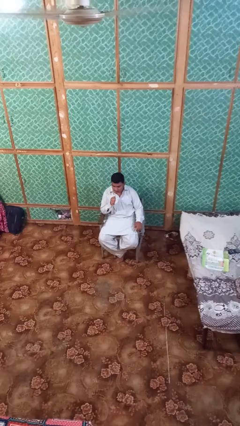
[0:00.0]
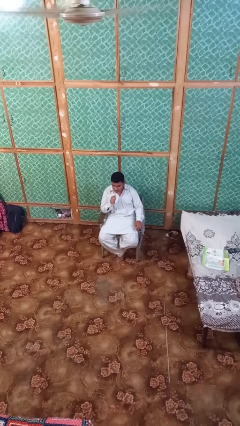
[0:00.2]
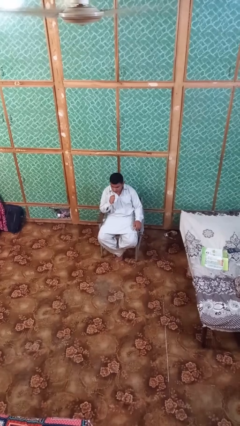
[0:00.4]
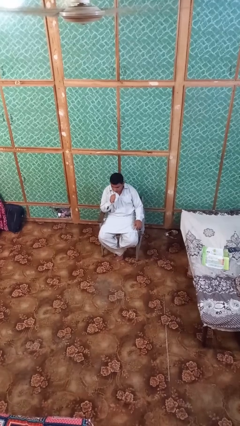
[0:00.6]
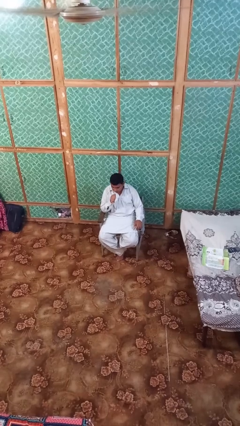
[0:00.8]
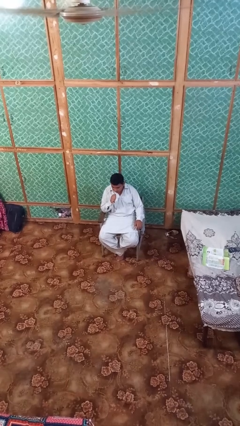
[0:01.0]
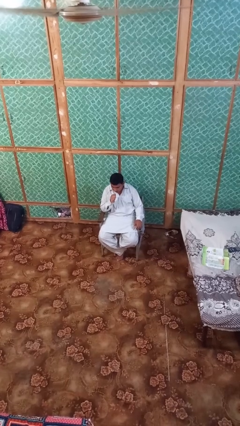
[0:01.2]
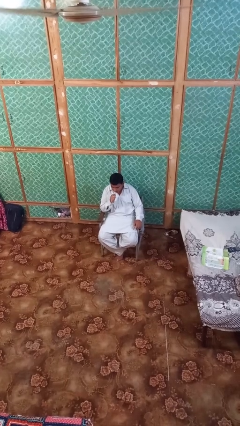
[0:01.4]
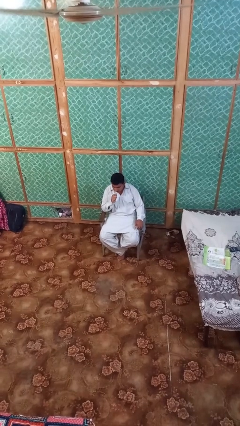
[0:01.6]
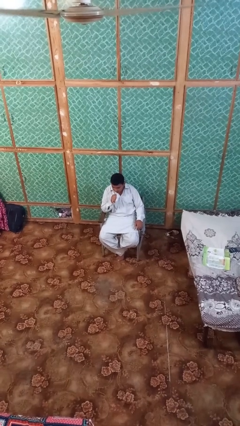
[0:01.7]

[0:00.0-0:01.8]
person vapes

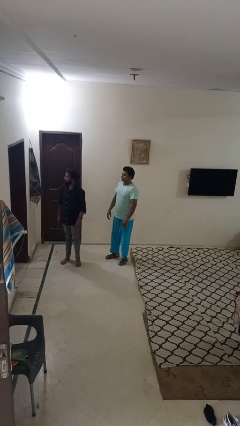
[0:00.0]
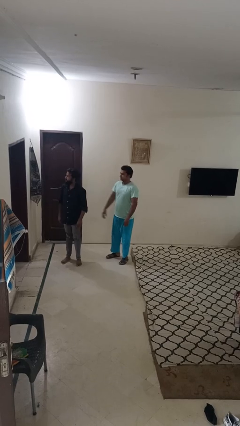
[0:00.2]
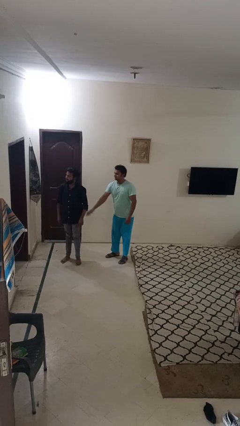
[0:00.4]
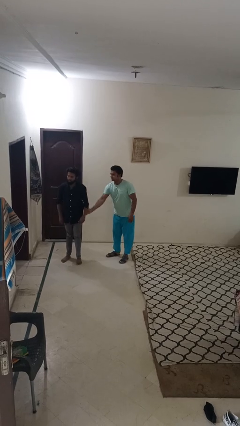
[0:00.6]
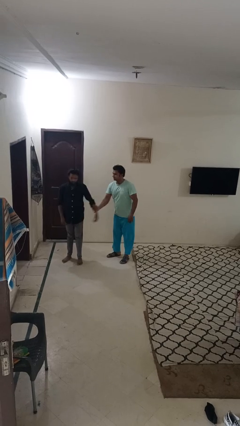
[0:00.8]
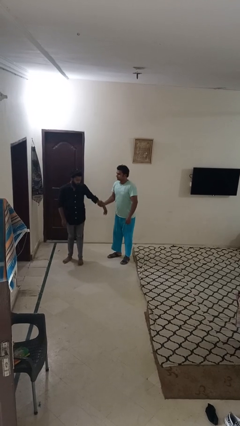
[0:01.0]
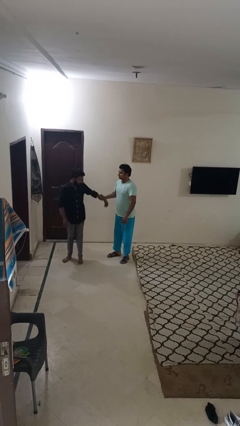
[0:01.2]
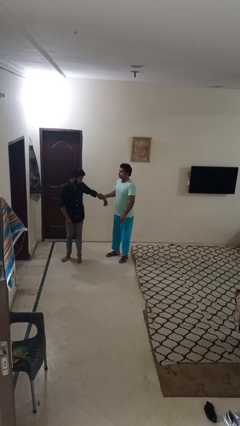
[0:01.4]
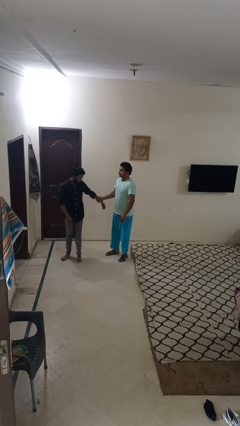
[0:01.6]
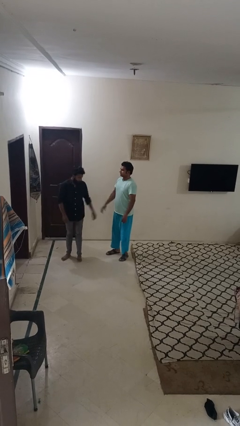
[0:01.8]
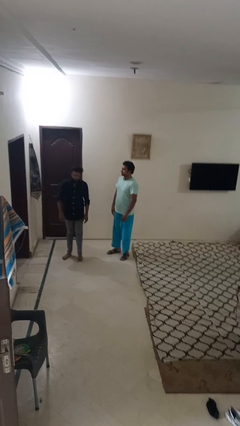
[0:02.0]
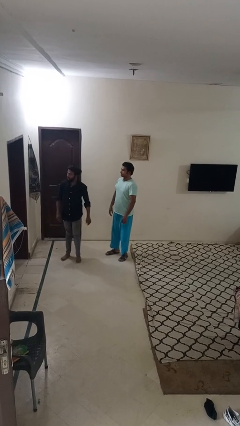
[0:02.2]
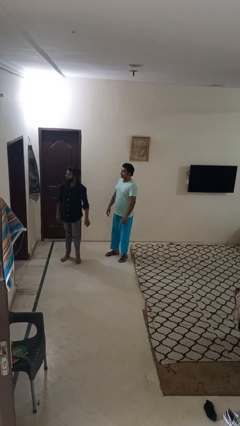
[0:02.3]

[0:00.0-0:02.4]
person grabs person by forearm

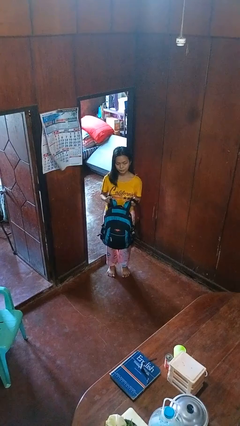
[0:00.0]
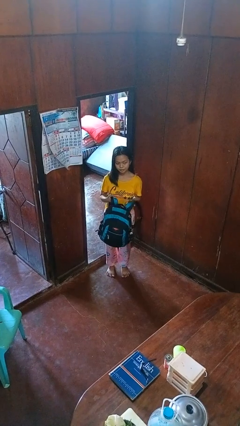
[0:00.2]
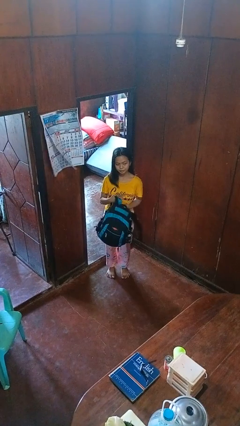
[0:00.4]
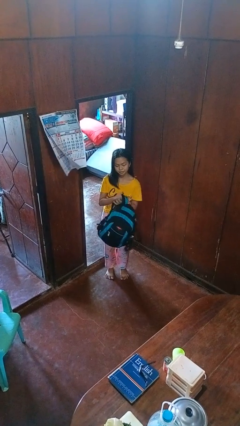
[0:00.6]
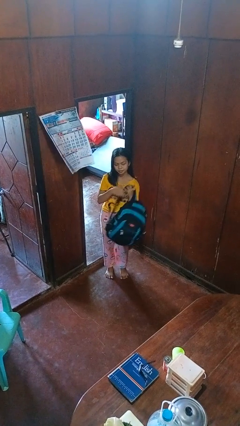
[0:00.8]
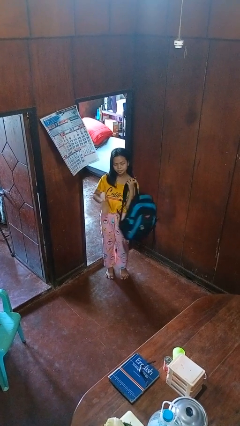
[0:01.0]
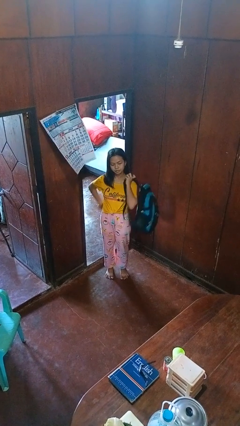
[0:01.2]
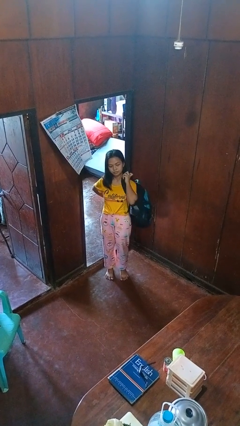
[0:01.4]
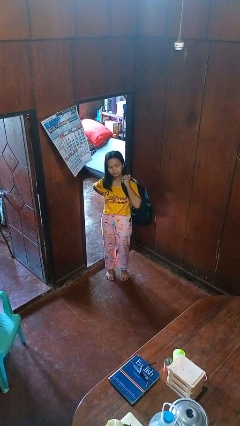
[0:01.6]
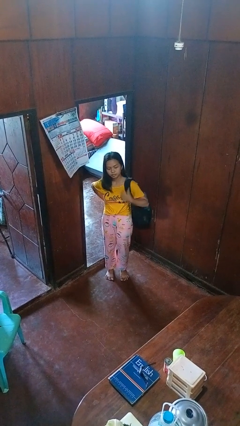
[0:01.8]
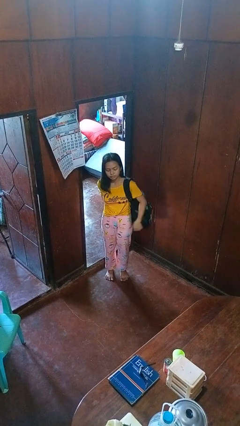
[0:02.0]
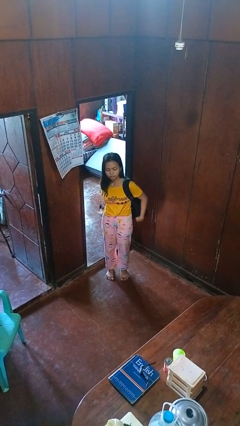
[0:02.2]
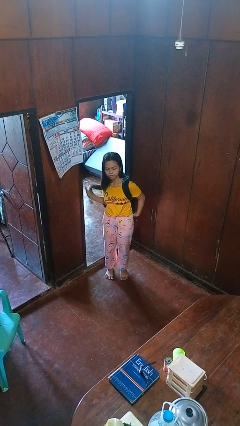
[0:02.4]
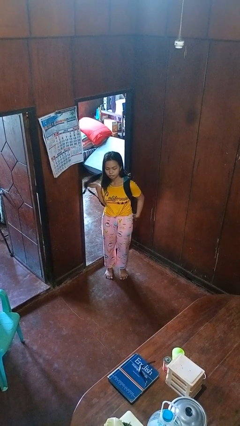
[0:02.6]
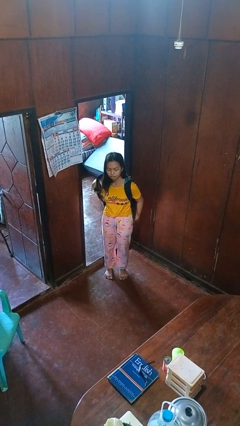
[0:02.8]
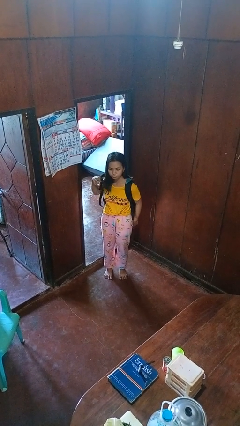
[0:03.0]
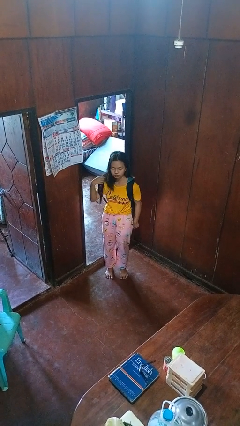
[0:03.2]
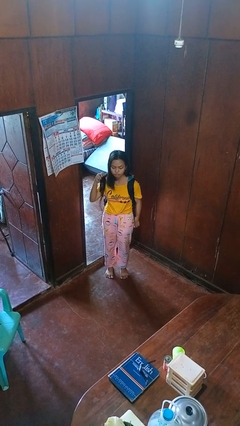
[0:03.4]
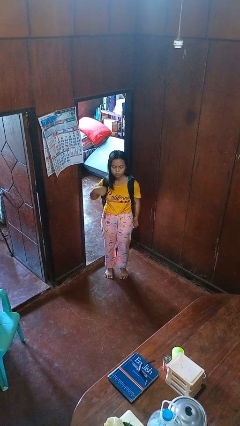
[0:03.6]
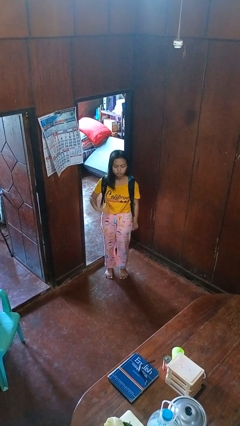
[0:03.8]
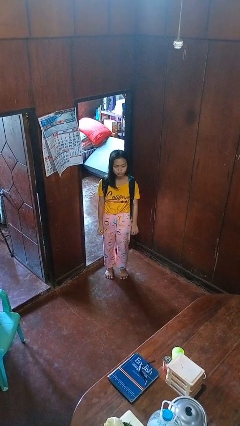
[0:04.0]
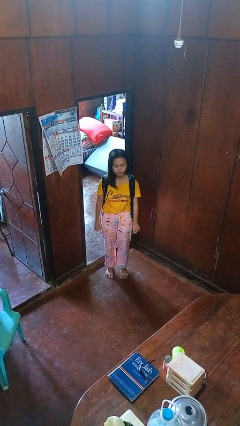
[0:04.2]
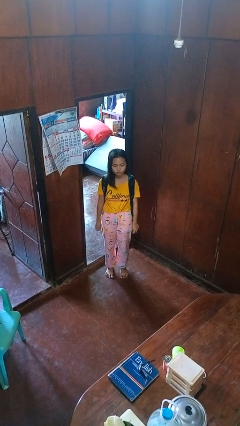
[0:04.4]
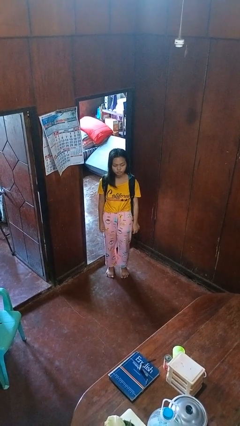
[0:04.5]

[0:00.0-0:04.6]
person puts on backpack

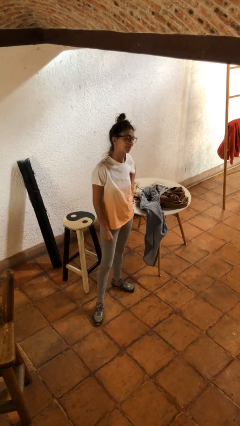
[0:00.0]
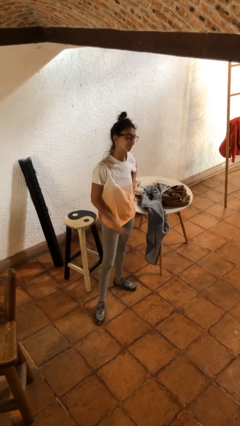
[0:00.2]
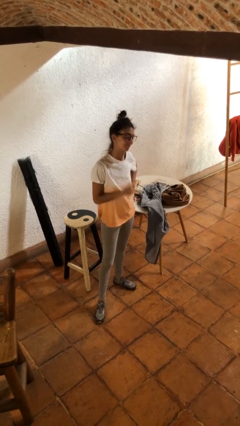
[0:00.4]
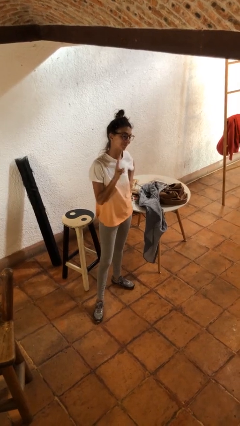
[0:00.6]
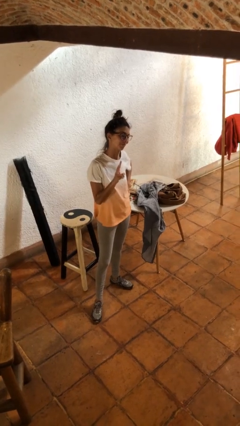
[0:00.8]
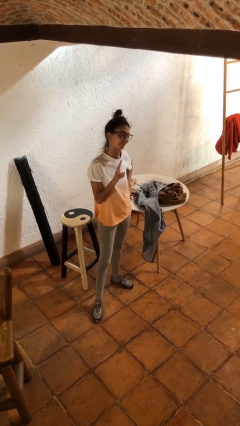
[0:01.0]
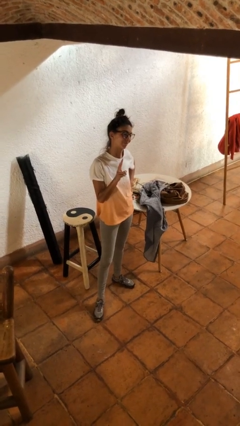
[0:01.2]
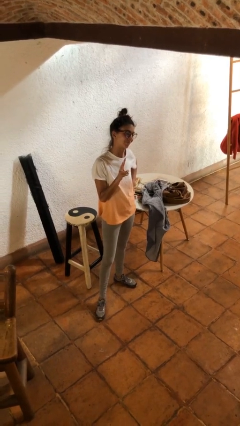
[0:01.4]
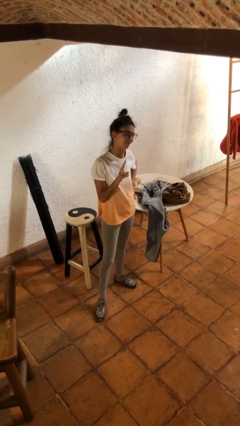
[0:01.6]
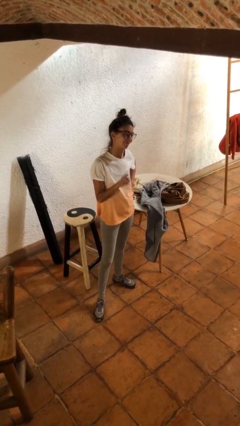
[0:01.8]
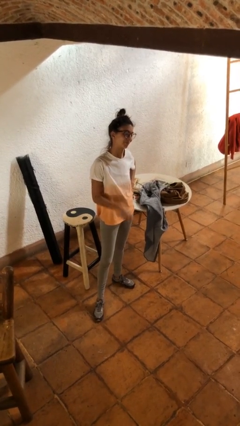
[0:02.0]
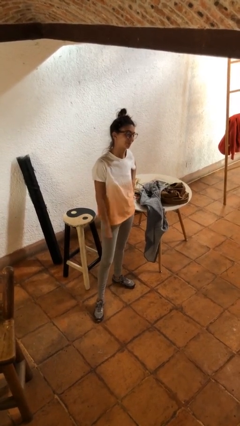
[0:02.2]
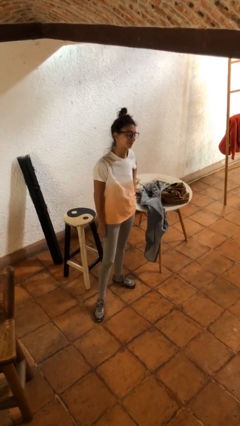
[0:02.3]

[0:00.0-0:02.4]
person gestures peace

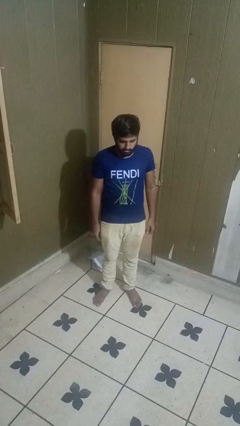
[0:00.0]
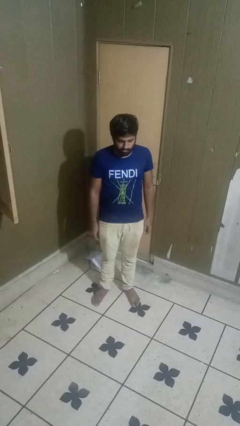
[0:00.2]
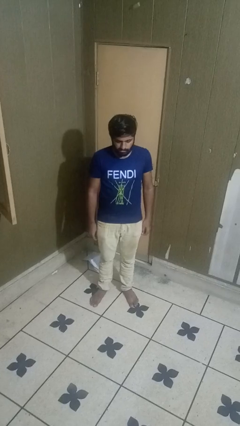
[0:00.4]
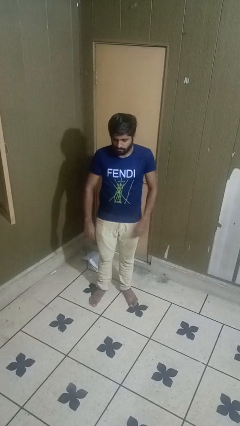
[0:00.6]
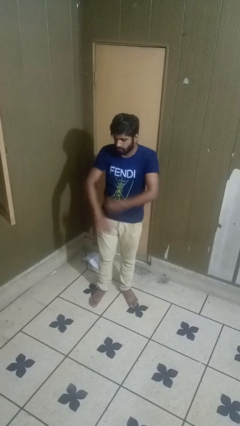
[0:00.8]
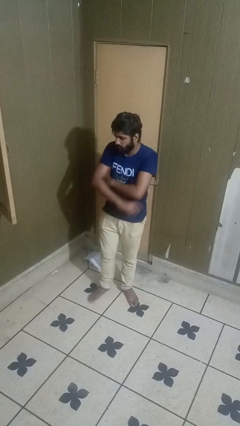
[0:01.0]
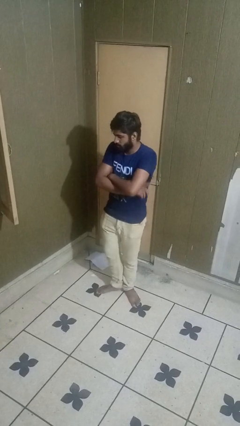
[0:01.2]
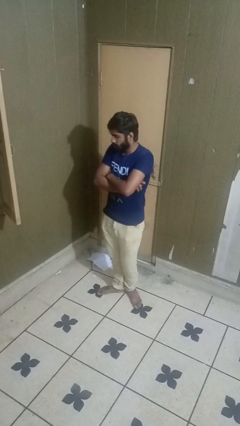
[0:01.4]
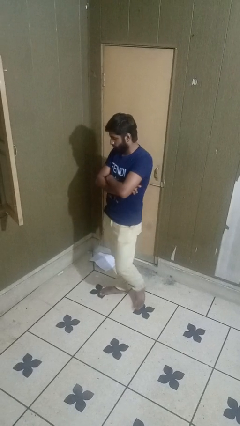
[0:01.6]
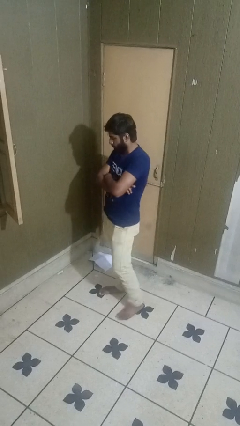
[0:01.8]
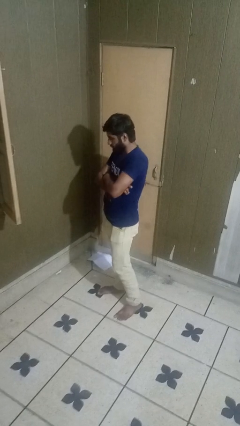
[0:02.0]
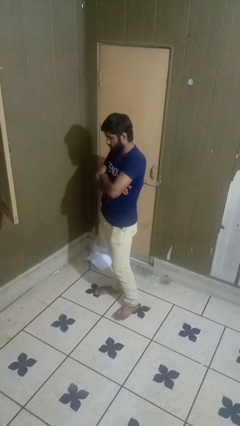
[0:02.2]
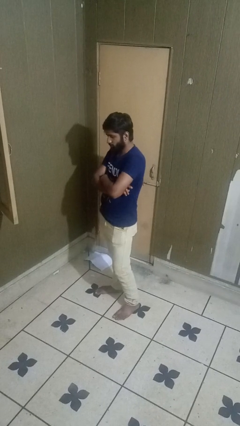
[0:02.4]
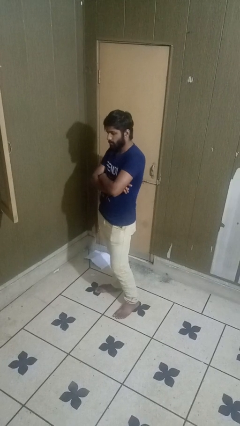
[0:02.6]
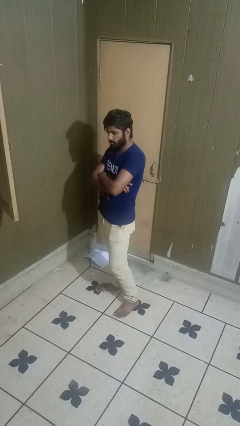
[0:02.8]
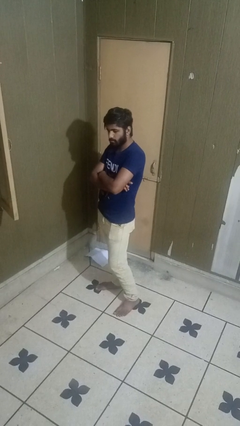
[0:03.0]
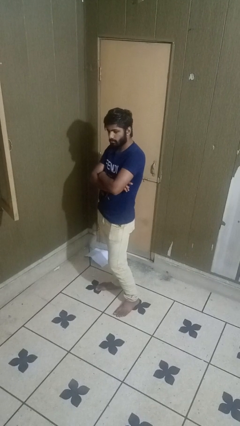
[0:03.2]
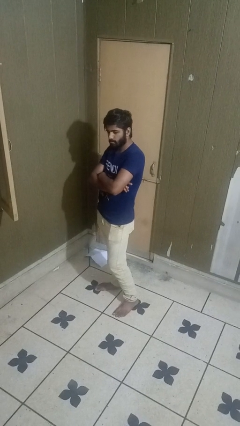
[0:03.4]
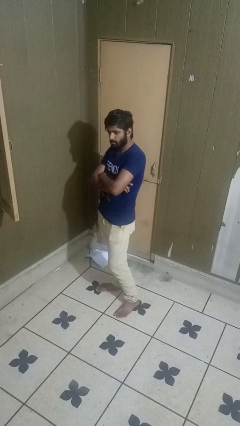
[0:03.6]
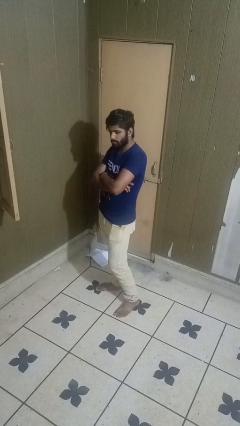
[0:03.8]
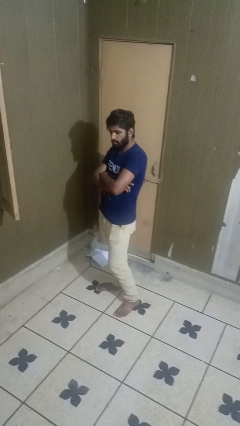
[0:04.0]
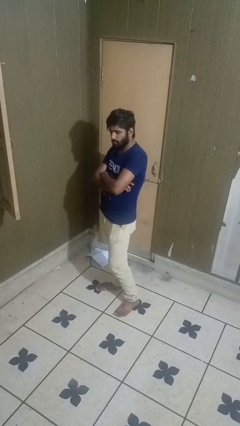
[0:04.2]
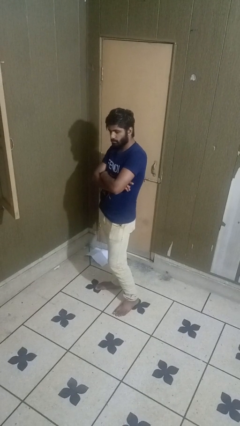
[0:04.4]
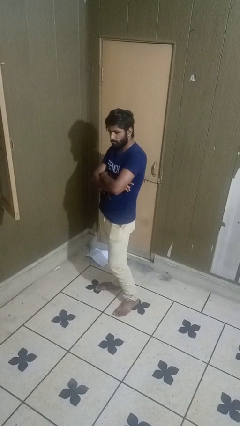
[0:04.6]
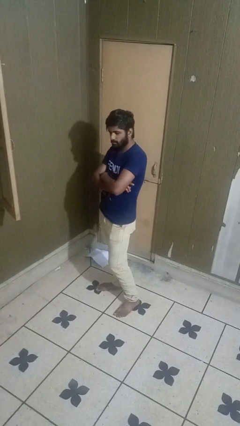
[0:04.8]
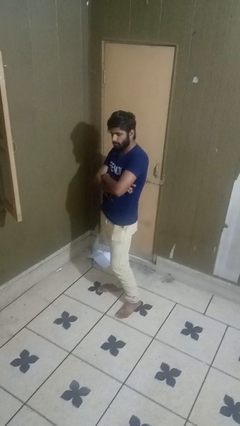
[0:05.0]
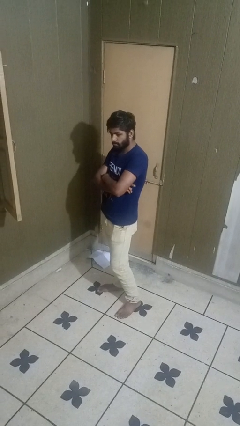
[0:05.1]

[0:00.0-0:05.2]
person crosses arms

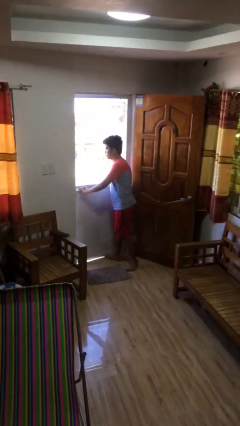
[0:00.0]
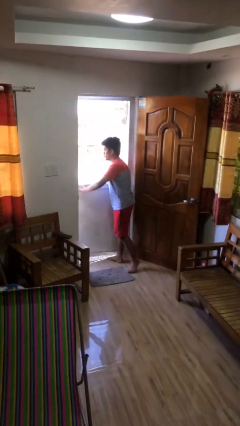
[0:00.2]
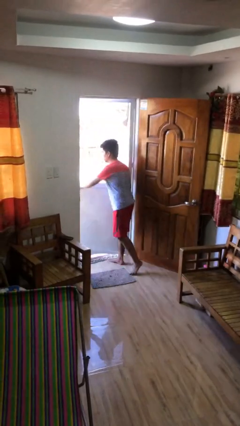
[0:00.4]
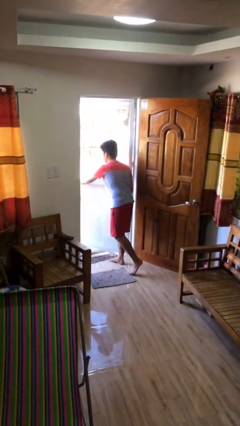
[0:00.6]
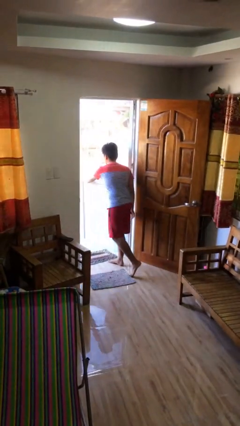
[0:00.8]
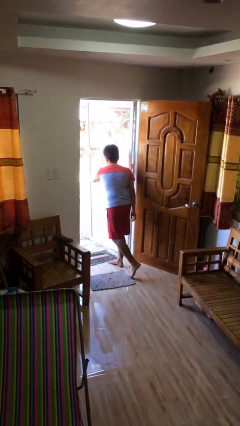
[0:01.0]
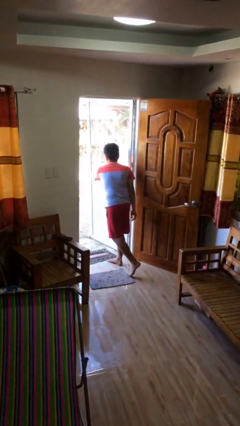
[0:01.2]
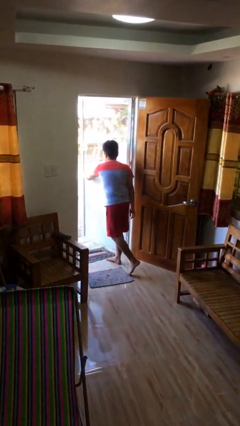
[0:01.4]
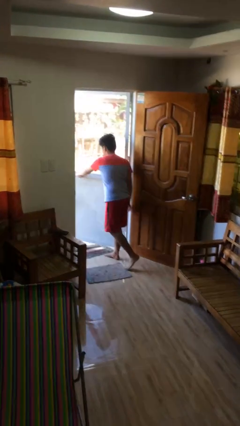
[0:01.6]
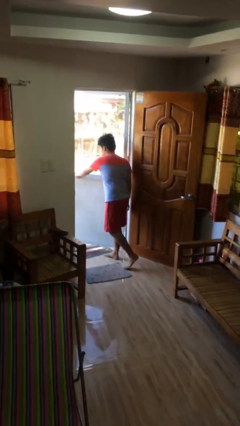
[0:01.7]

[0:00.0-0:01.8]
person opens facility door
